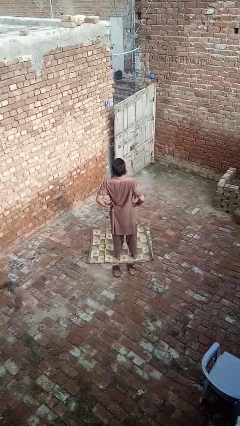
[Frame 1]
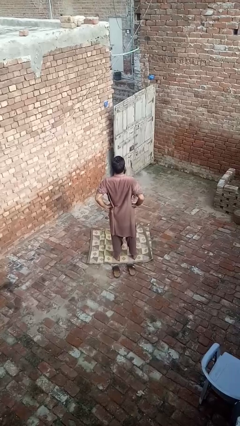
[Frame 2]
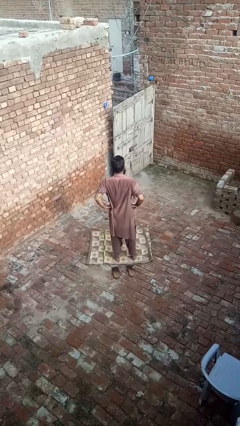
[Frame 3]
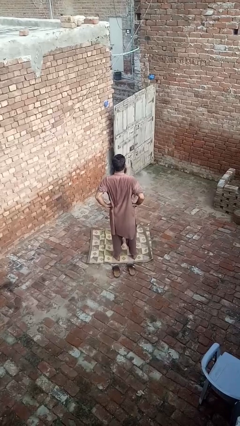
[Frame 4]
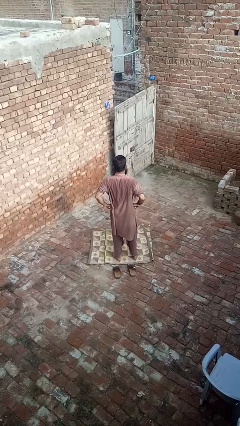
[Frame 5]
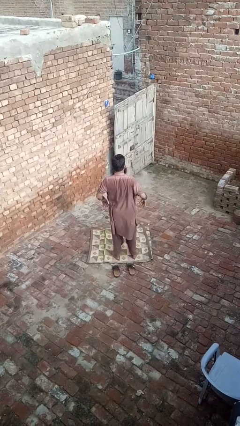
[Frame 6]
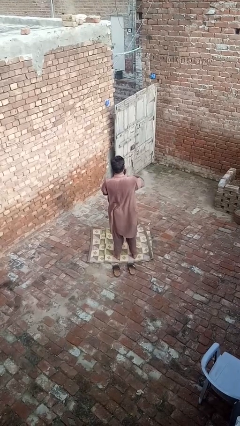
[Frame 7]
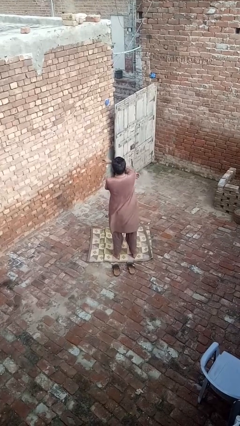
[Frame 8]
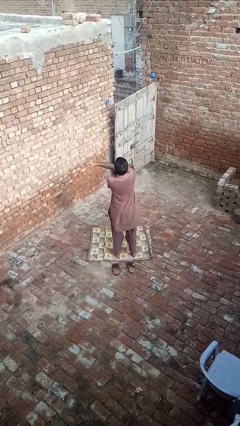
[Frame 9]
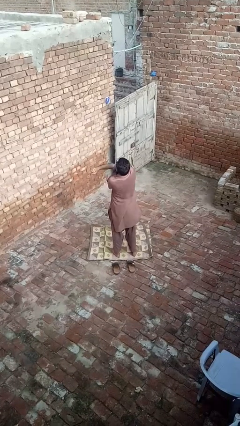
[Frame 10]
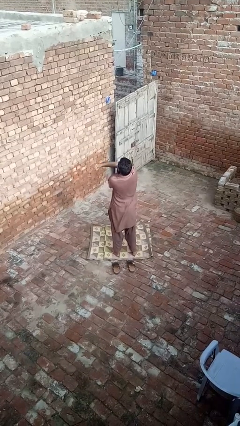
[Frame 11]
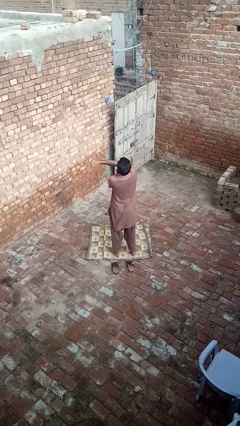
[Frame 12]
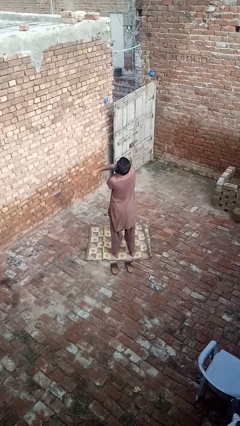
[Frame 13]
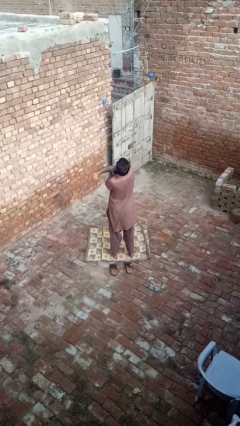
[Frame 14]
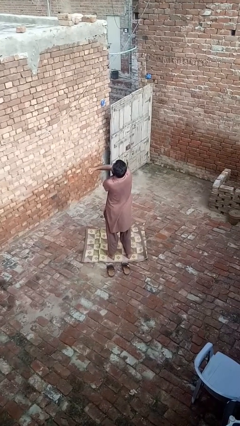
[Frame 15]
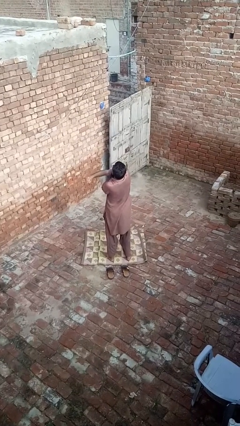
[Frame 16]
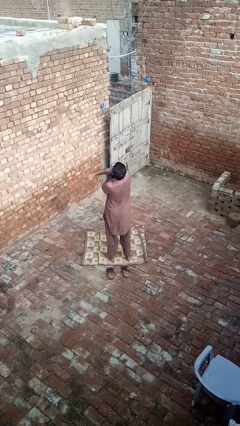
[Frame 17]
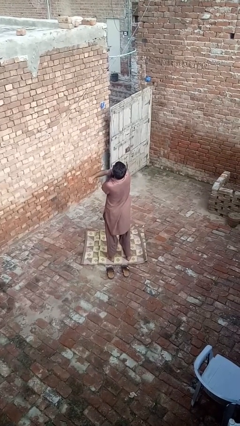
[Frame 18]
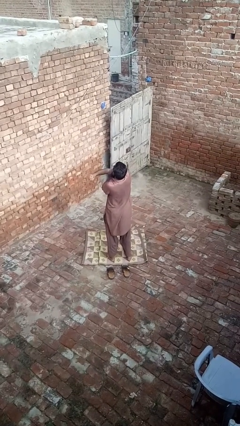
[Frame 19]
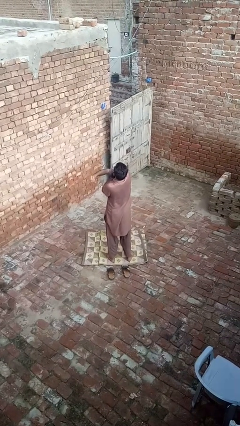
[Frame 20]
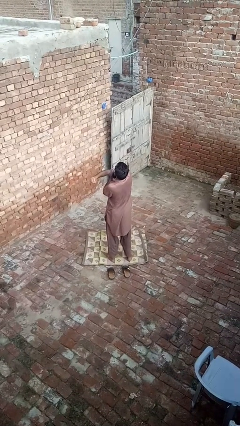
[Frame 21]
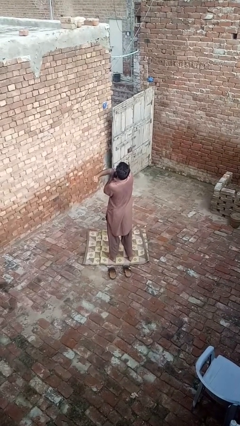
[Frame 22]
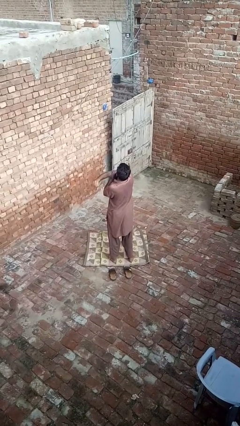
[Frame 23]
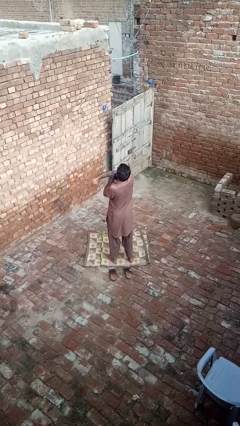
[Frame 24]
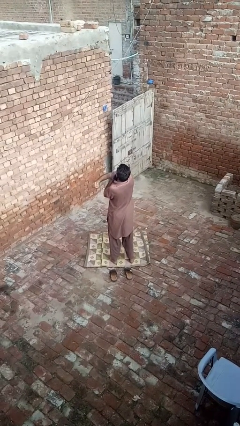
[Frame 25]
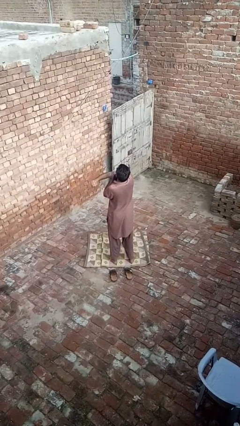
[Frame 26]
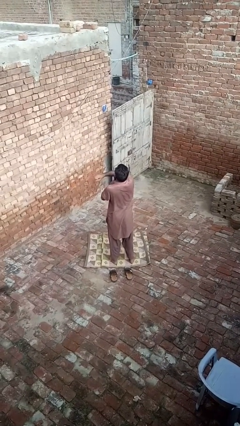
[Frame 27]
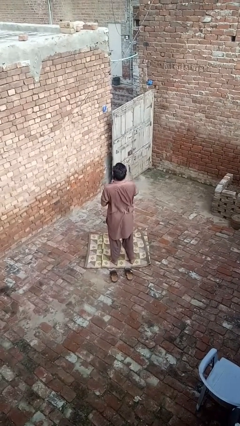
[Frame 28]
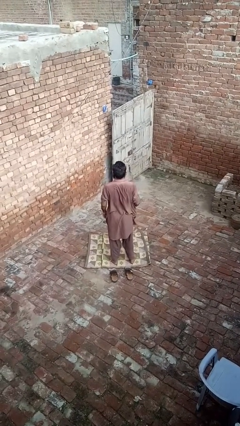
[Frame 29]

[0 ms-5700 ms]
person stretches arms to side

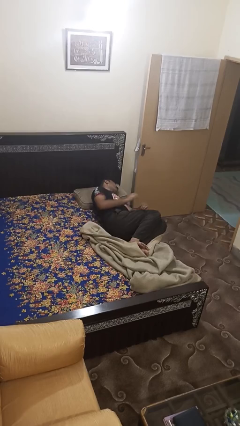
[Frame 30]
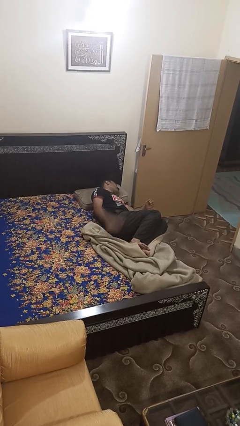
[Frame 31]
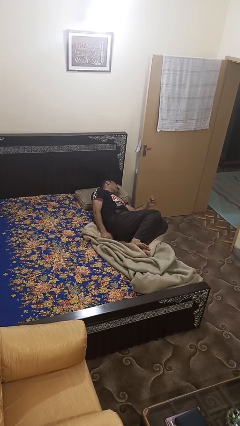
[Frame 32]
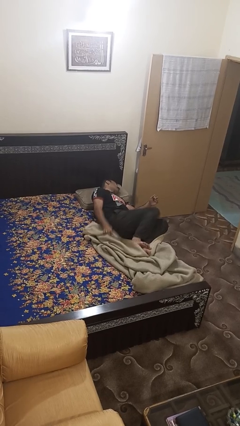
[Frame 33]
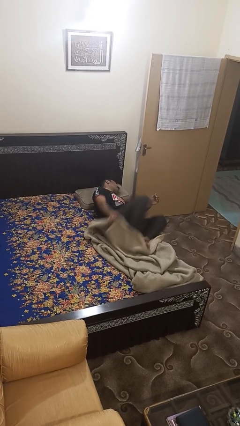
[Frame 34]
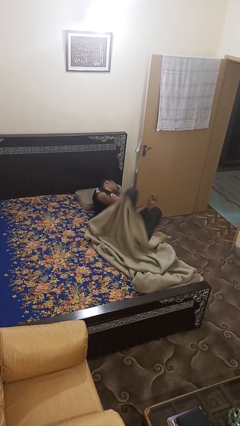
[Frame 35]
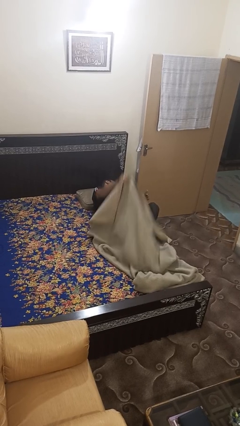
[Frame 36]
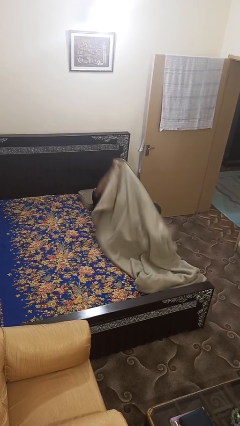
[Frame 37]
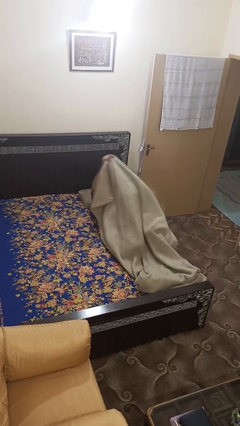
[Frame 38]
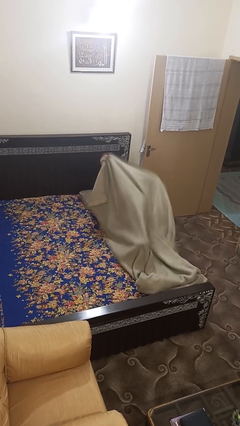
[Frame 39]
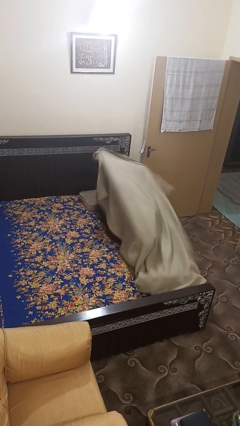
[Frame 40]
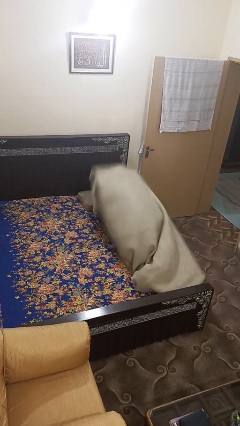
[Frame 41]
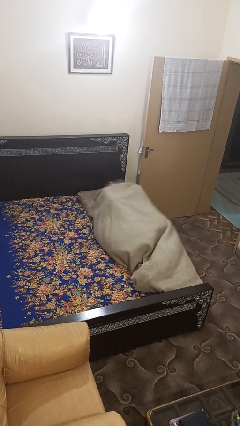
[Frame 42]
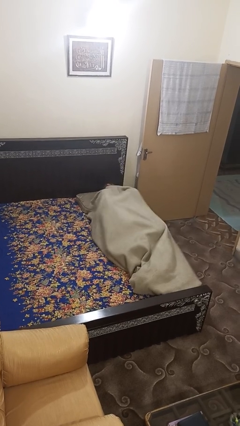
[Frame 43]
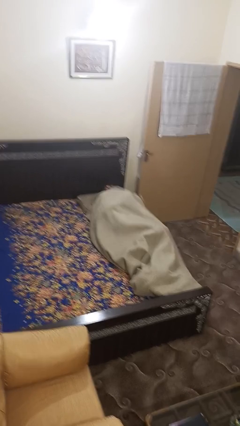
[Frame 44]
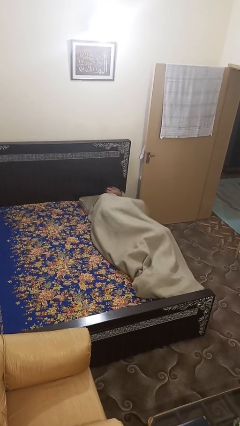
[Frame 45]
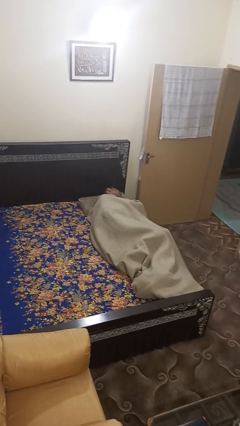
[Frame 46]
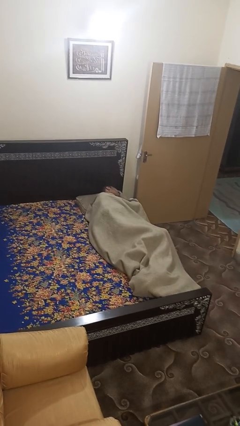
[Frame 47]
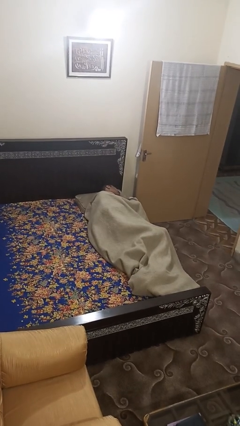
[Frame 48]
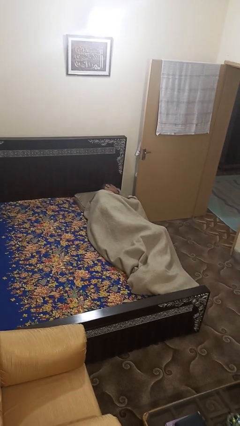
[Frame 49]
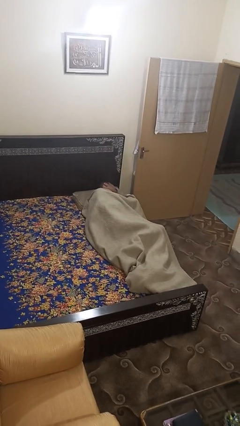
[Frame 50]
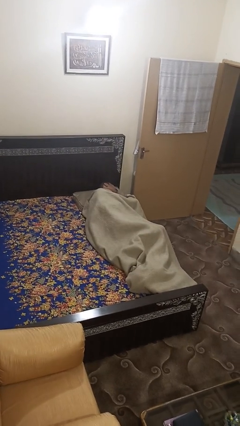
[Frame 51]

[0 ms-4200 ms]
person covers with bedsheets

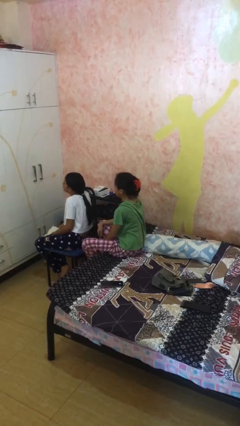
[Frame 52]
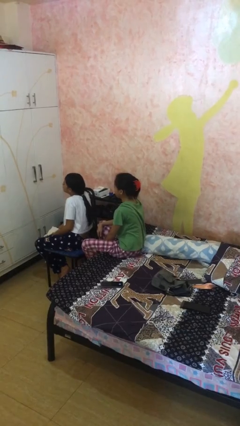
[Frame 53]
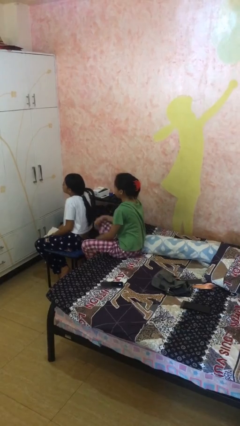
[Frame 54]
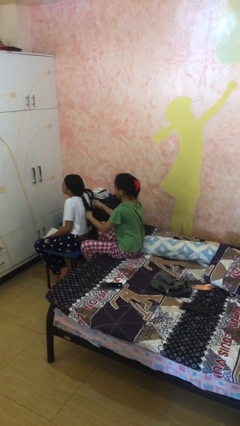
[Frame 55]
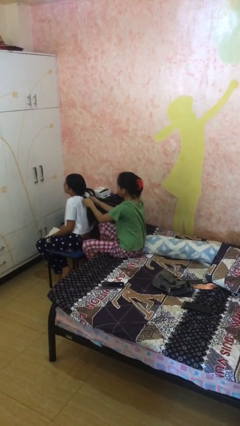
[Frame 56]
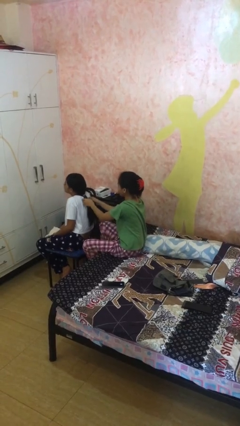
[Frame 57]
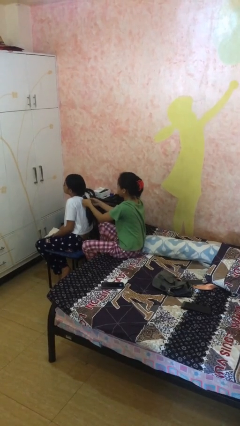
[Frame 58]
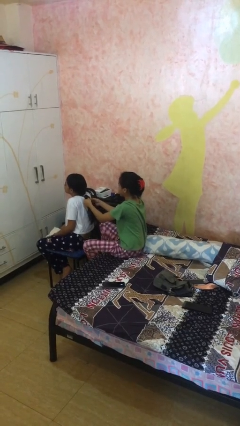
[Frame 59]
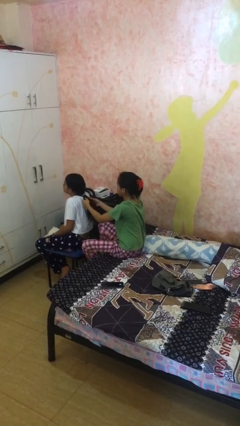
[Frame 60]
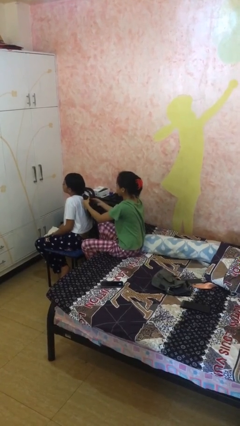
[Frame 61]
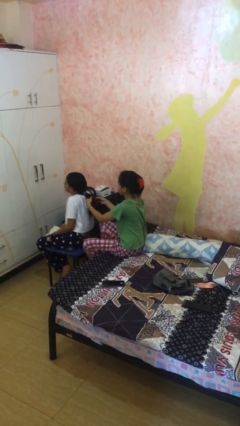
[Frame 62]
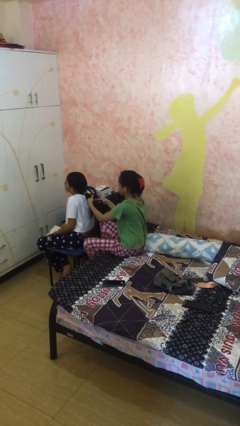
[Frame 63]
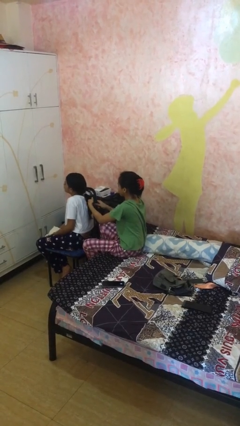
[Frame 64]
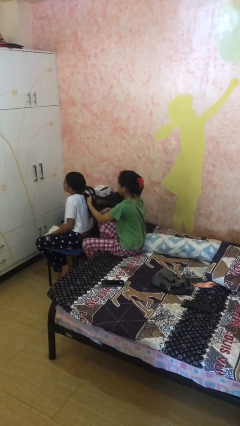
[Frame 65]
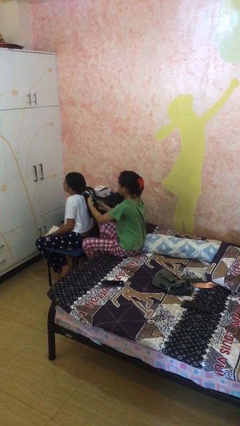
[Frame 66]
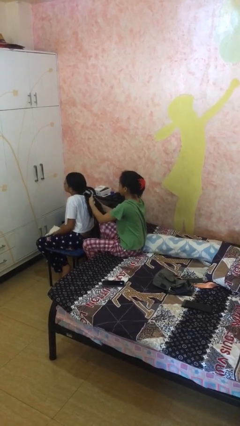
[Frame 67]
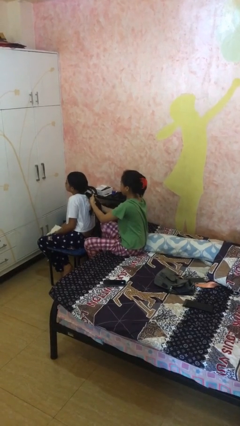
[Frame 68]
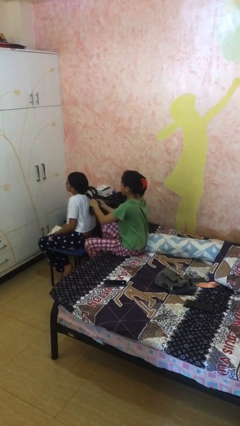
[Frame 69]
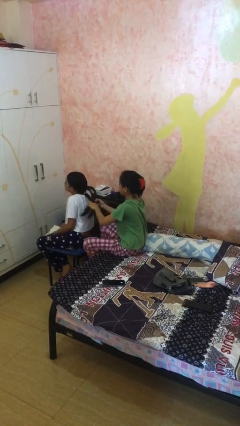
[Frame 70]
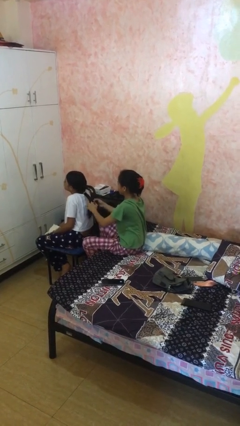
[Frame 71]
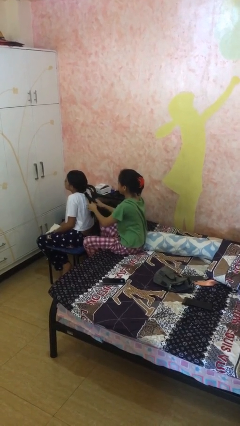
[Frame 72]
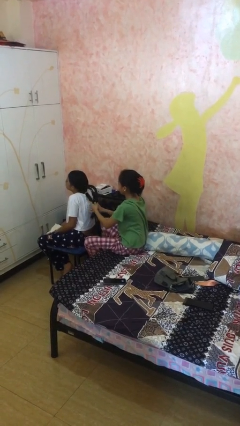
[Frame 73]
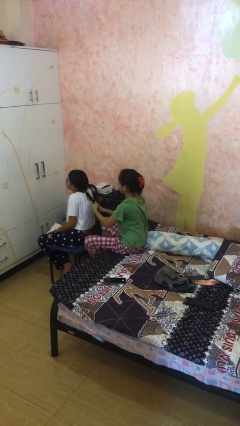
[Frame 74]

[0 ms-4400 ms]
person braids hair of person

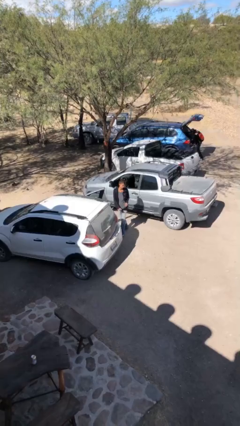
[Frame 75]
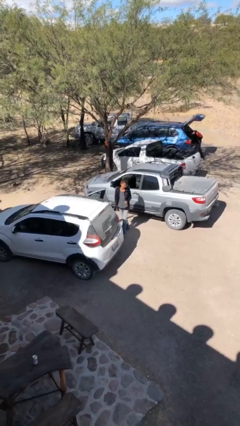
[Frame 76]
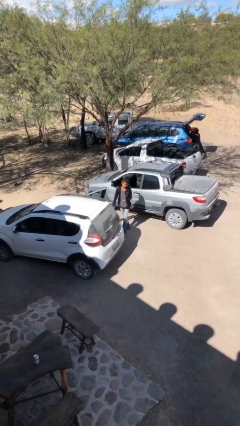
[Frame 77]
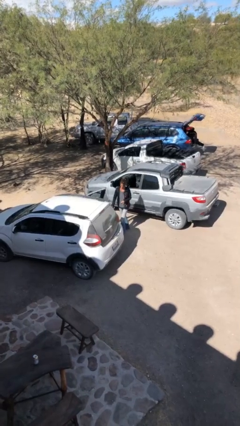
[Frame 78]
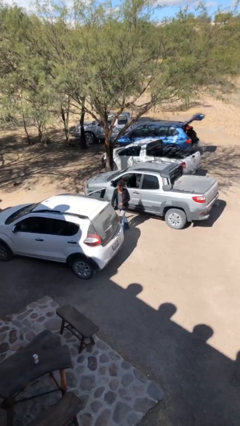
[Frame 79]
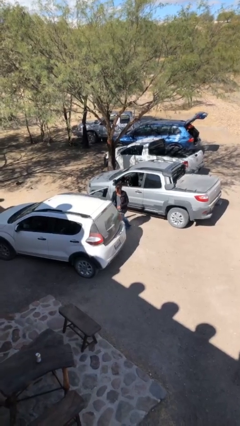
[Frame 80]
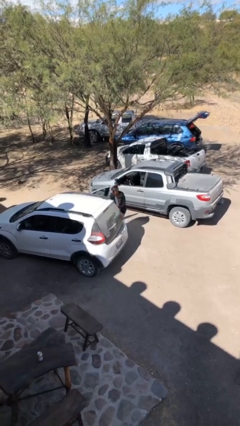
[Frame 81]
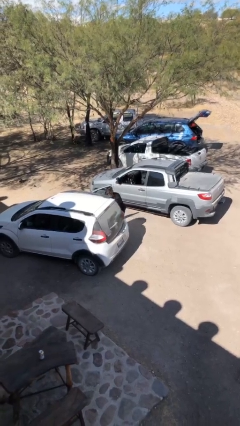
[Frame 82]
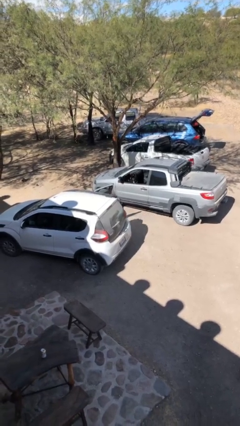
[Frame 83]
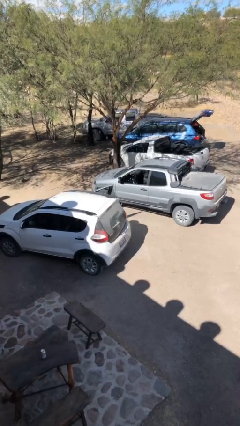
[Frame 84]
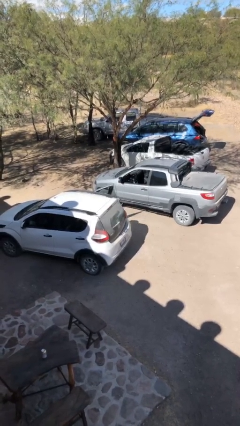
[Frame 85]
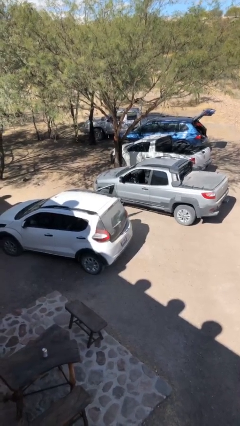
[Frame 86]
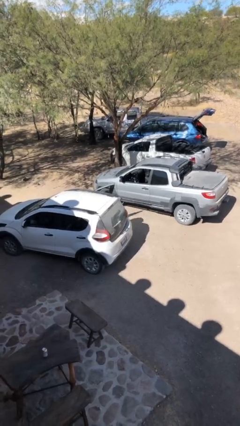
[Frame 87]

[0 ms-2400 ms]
person unloads car

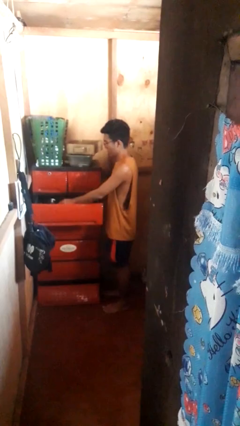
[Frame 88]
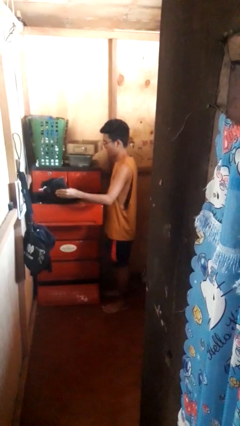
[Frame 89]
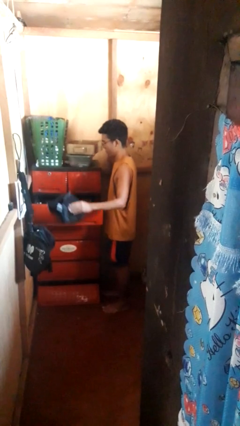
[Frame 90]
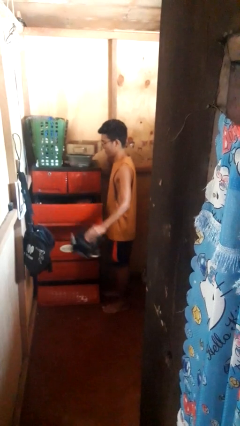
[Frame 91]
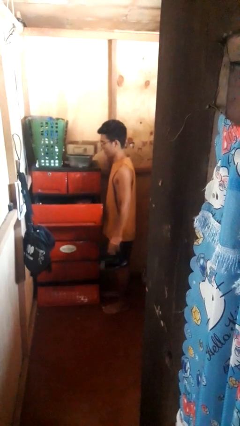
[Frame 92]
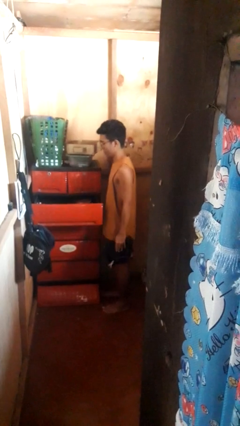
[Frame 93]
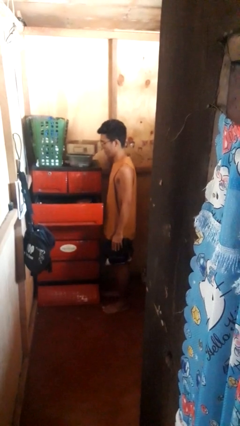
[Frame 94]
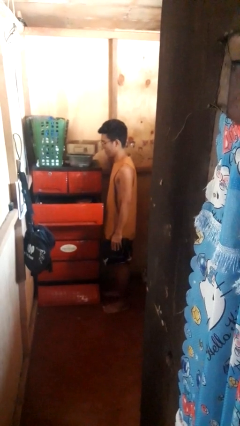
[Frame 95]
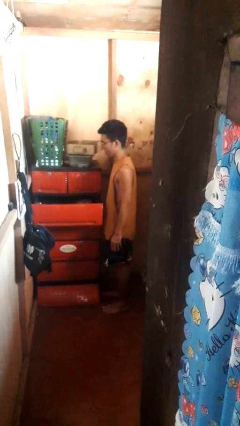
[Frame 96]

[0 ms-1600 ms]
person takes clothes from dresser
